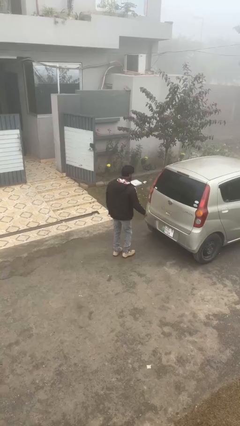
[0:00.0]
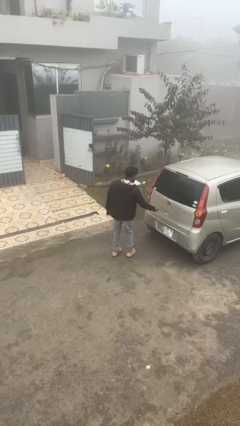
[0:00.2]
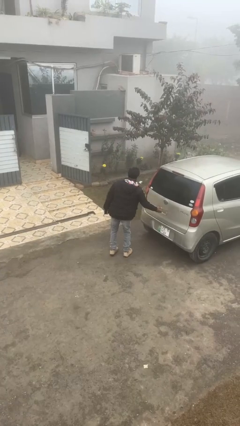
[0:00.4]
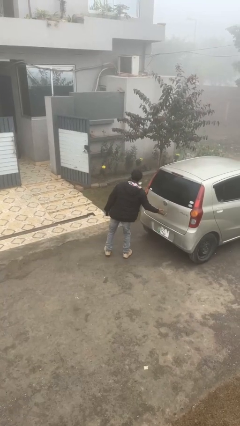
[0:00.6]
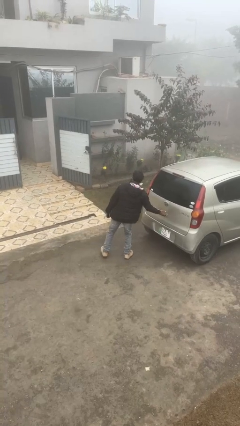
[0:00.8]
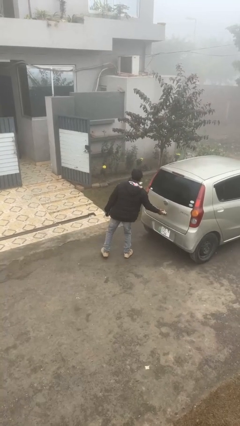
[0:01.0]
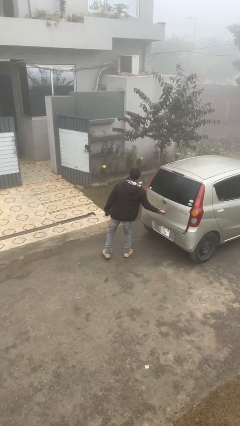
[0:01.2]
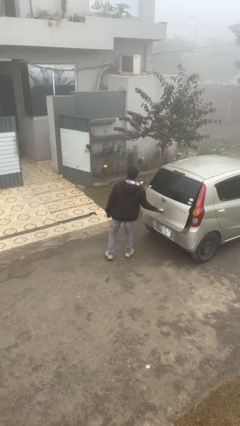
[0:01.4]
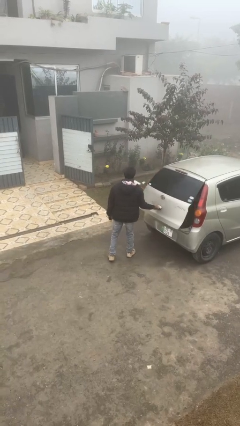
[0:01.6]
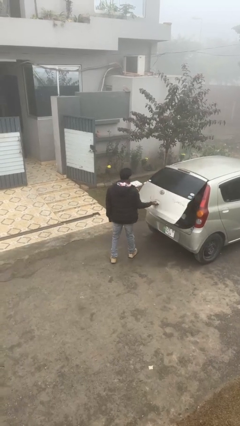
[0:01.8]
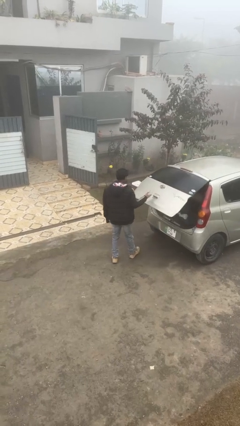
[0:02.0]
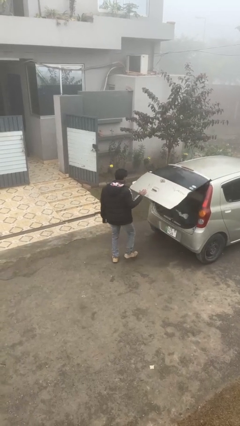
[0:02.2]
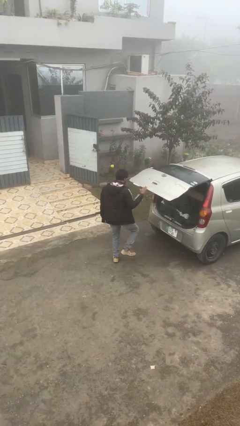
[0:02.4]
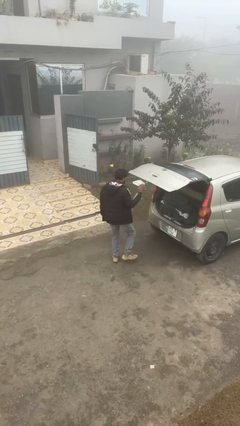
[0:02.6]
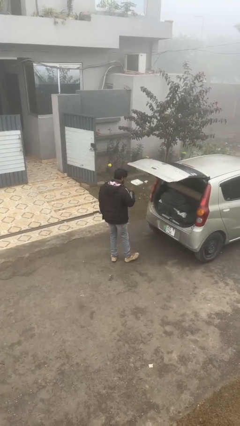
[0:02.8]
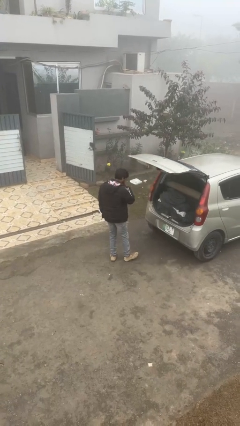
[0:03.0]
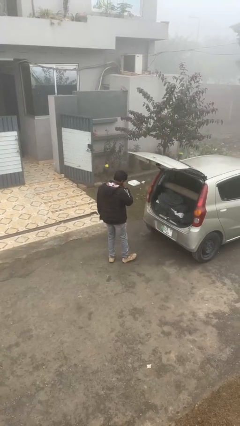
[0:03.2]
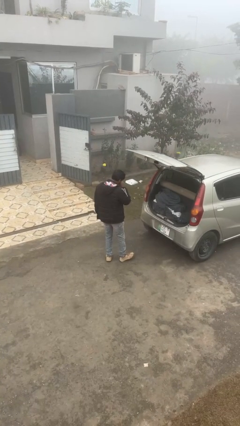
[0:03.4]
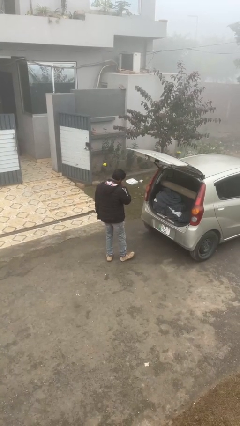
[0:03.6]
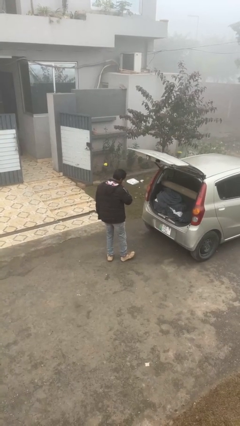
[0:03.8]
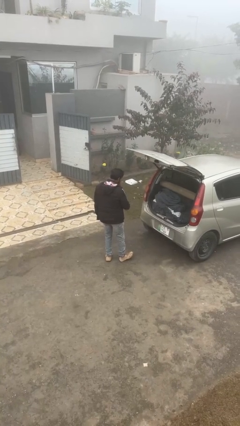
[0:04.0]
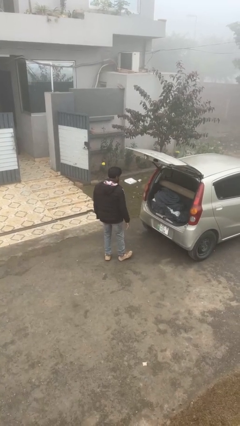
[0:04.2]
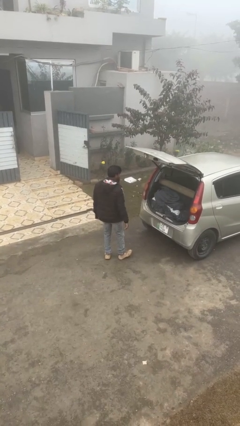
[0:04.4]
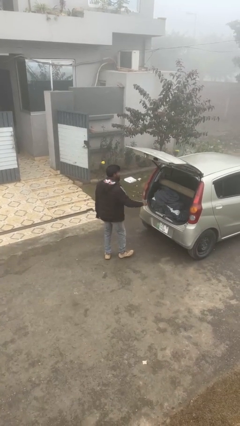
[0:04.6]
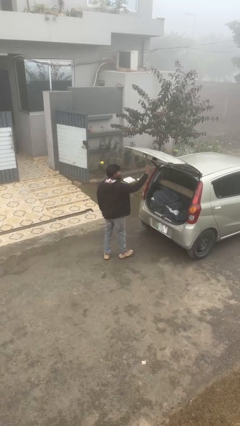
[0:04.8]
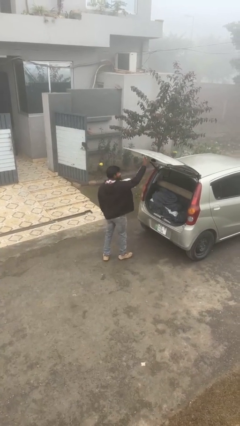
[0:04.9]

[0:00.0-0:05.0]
person opens car trunk

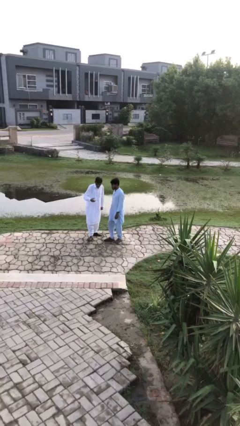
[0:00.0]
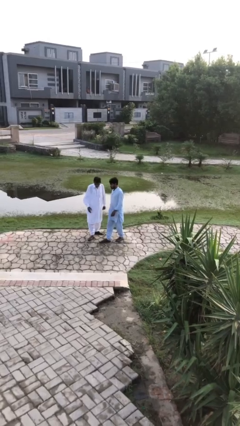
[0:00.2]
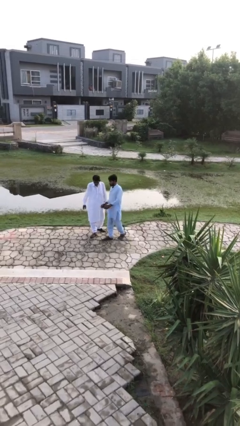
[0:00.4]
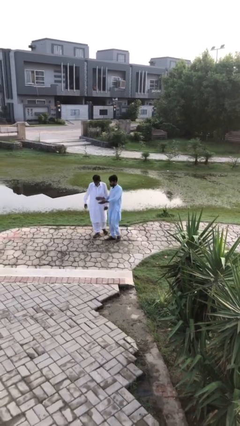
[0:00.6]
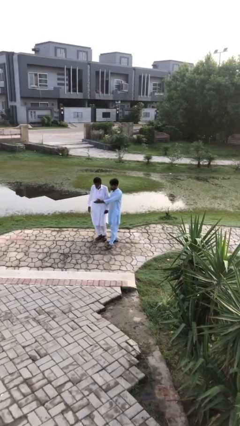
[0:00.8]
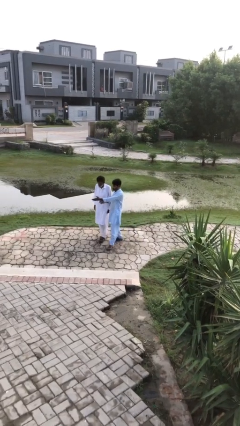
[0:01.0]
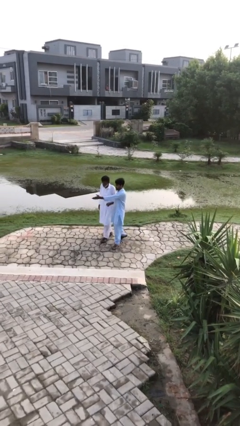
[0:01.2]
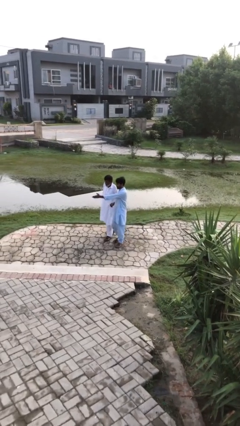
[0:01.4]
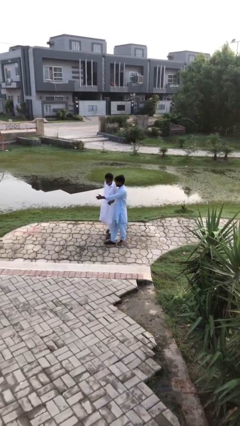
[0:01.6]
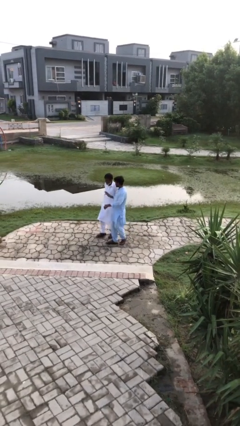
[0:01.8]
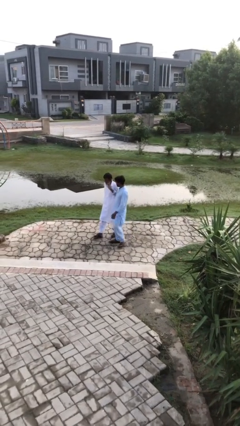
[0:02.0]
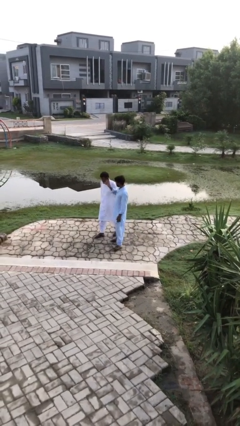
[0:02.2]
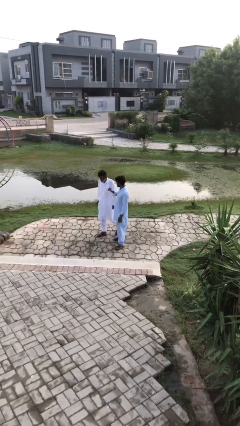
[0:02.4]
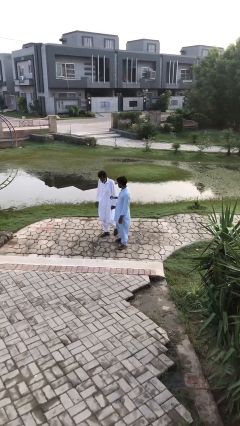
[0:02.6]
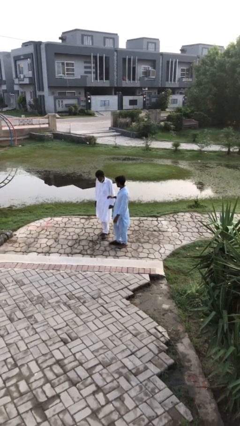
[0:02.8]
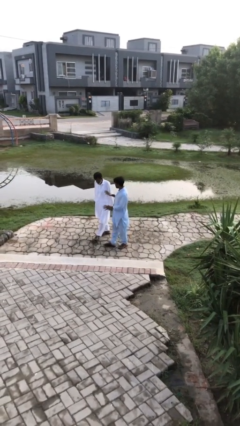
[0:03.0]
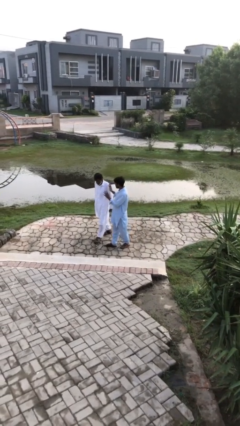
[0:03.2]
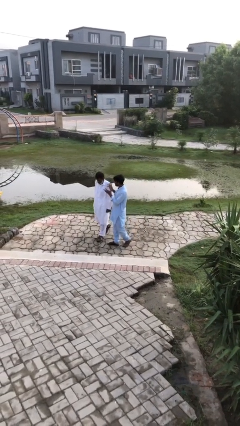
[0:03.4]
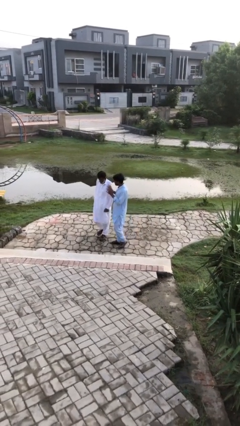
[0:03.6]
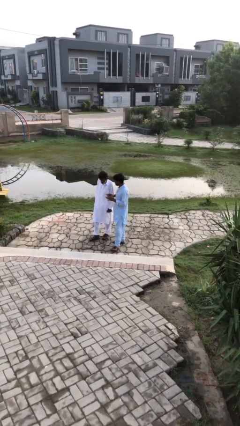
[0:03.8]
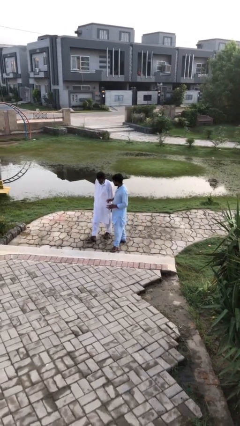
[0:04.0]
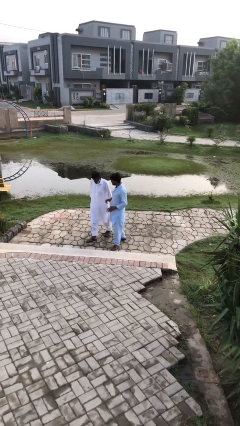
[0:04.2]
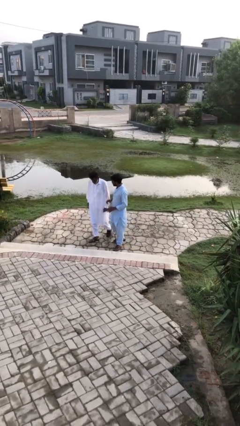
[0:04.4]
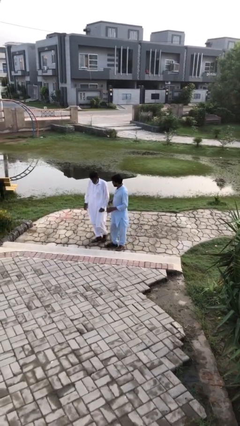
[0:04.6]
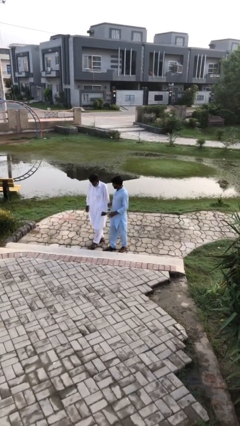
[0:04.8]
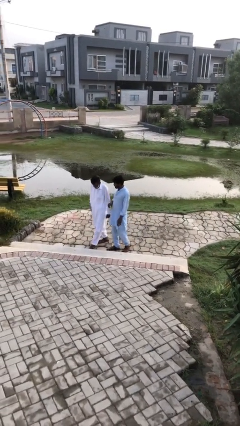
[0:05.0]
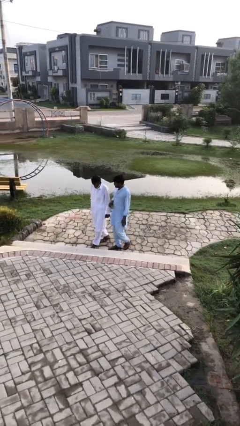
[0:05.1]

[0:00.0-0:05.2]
person talks to person

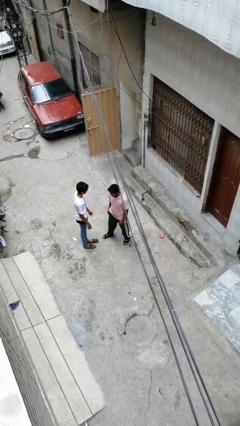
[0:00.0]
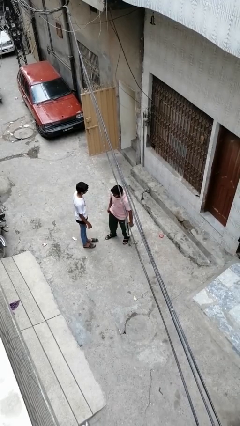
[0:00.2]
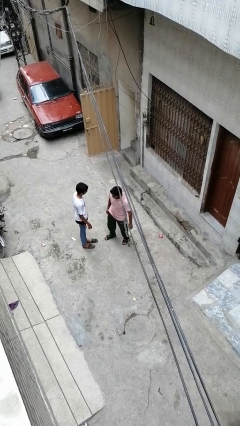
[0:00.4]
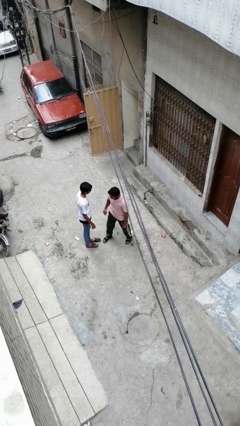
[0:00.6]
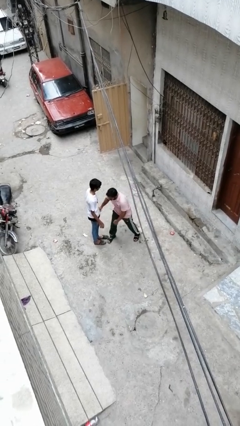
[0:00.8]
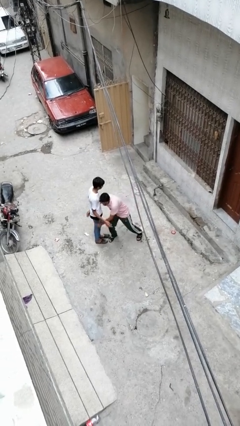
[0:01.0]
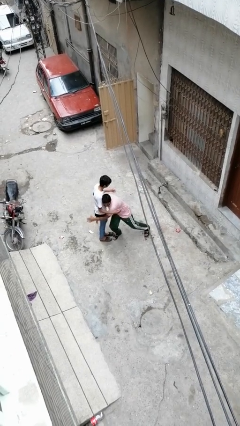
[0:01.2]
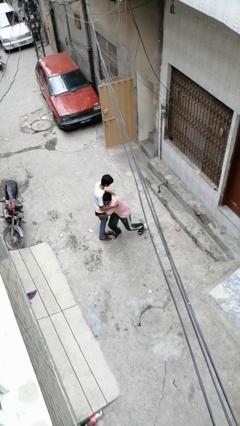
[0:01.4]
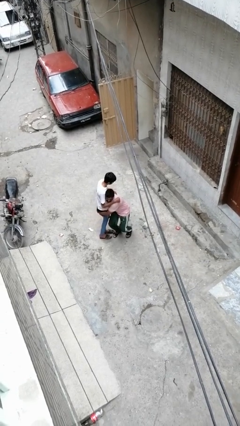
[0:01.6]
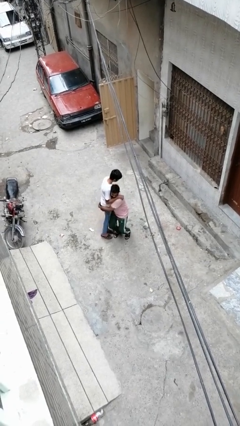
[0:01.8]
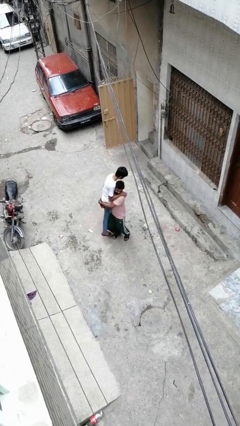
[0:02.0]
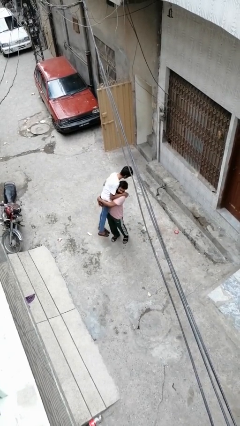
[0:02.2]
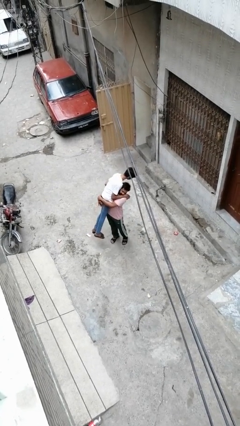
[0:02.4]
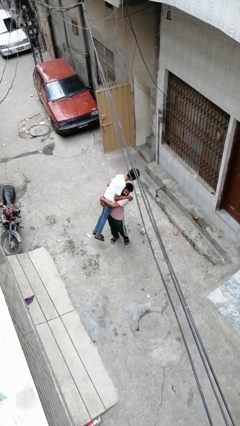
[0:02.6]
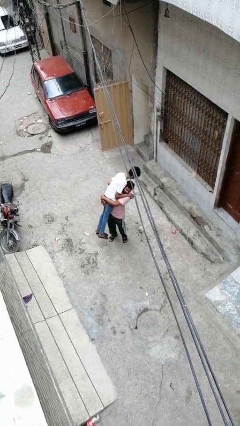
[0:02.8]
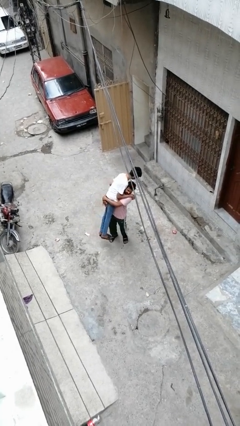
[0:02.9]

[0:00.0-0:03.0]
person picks up person

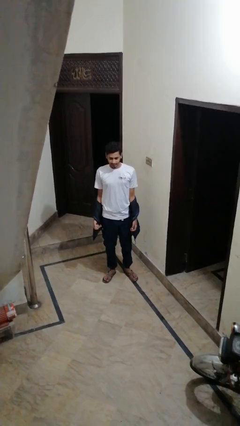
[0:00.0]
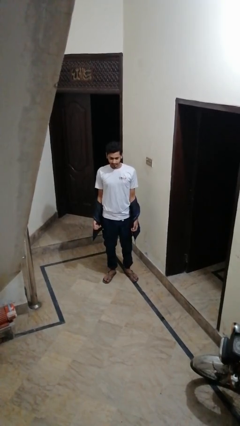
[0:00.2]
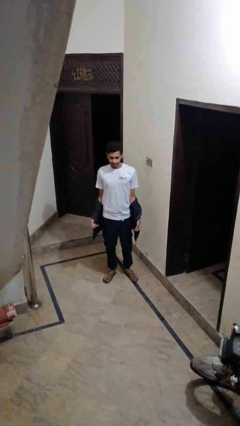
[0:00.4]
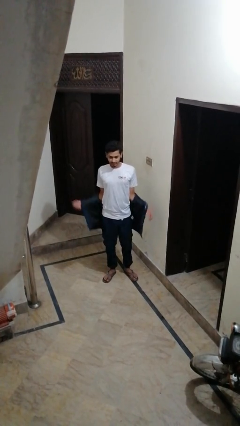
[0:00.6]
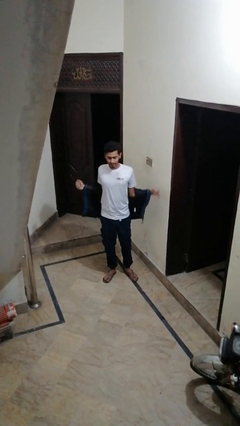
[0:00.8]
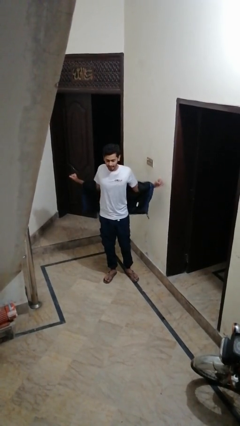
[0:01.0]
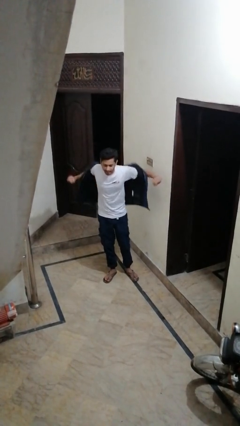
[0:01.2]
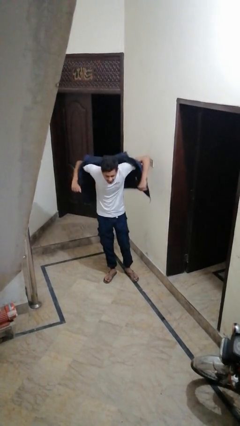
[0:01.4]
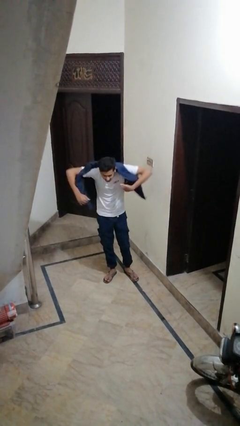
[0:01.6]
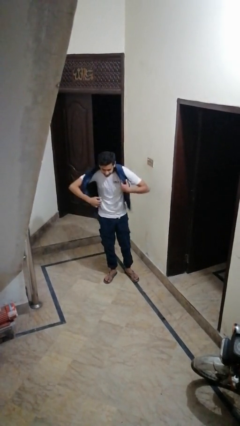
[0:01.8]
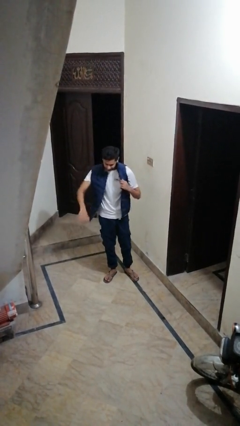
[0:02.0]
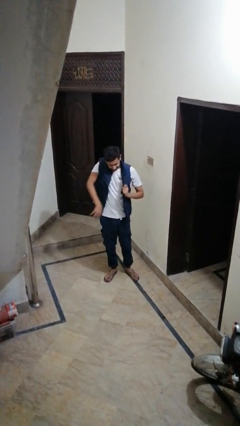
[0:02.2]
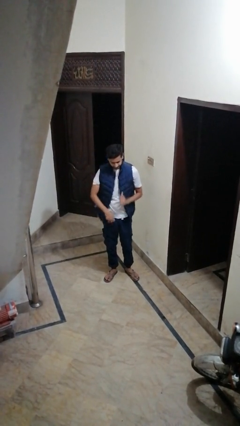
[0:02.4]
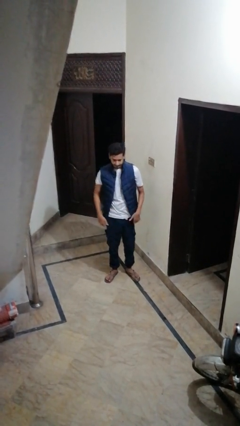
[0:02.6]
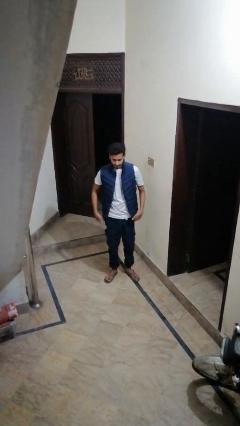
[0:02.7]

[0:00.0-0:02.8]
person puts on jacket

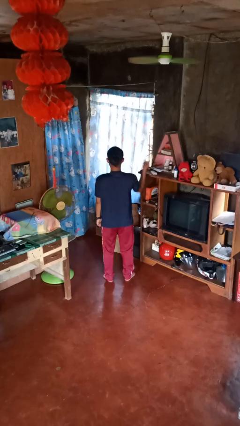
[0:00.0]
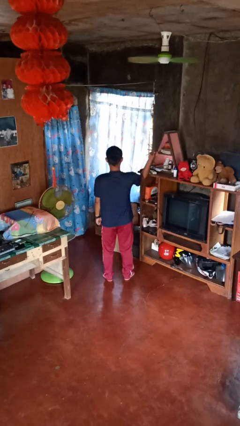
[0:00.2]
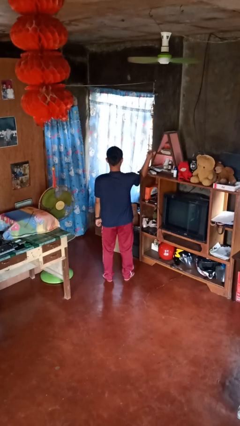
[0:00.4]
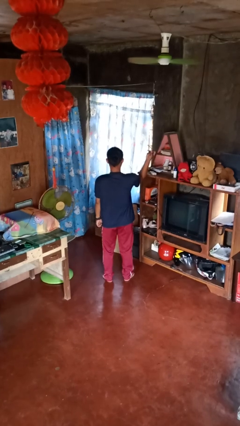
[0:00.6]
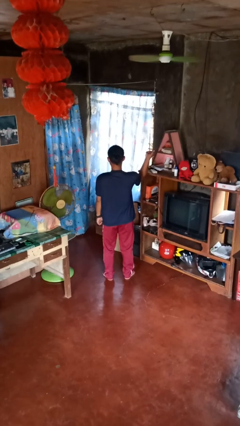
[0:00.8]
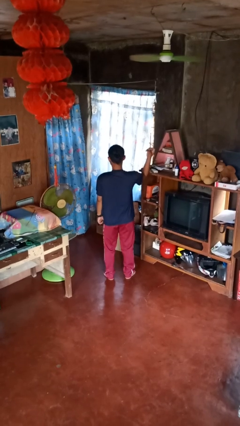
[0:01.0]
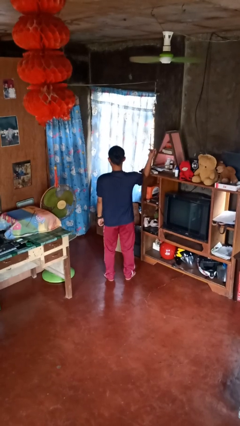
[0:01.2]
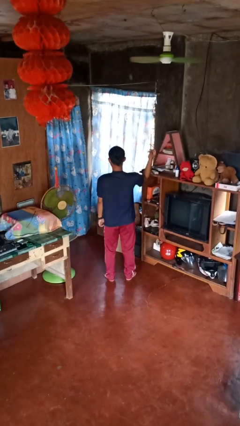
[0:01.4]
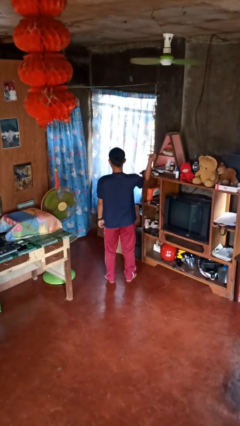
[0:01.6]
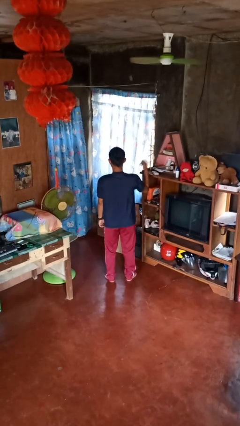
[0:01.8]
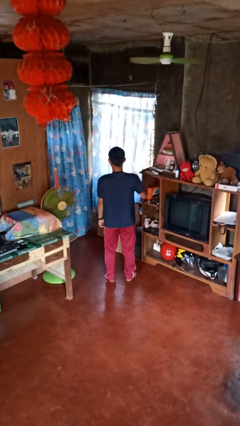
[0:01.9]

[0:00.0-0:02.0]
person snaps fingers
